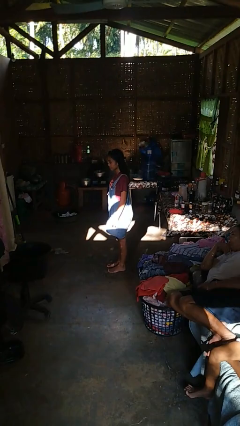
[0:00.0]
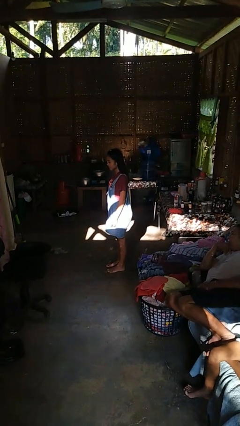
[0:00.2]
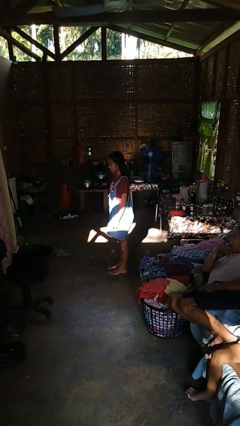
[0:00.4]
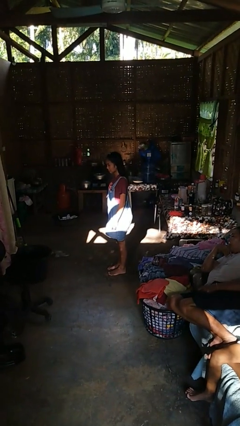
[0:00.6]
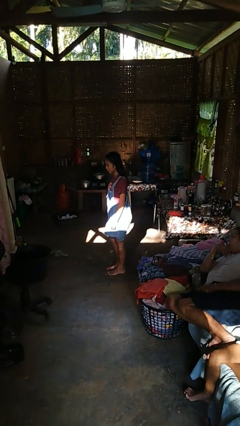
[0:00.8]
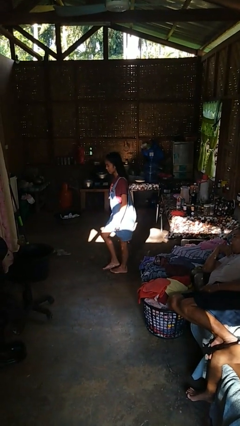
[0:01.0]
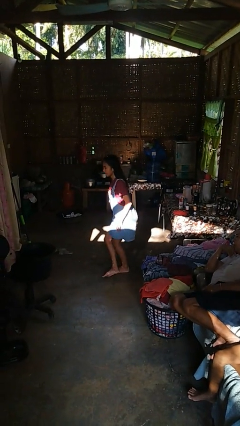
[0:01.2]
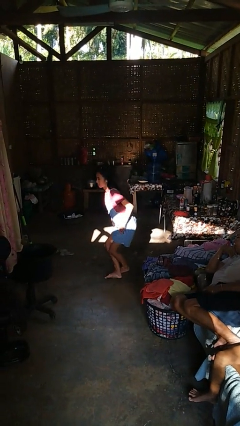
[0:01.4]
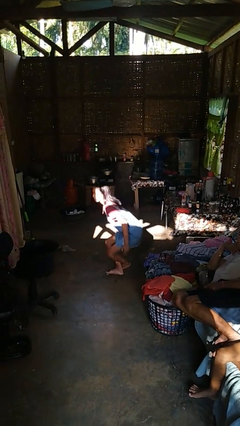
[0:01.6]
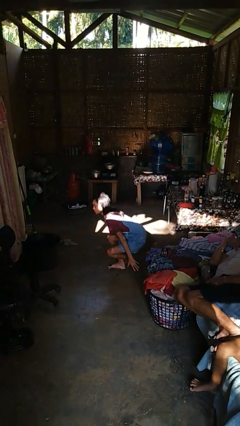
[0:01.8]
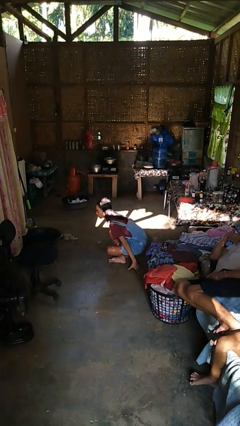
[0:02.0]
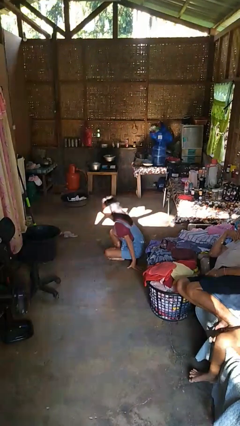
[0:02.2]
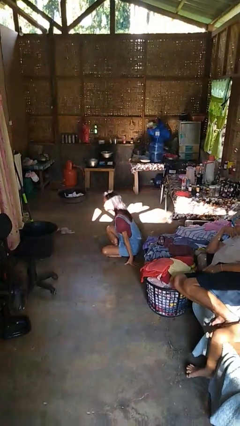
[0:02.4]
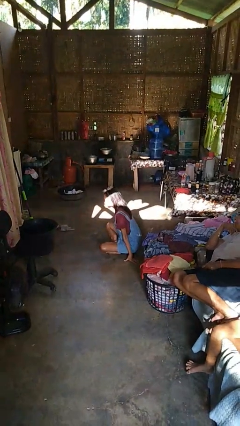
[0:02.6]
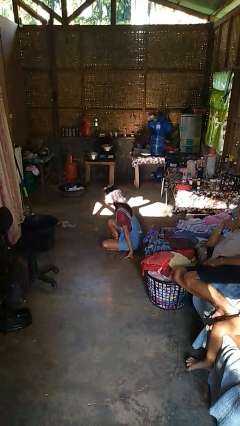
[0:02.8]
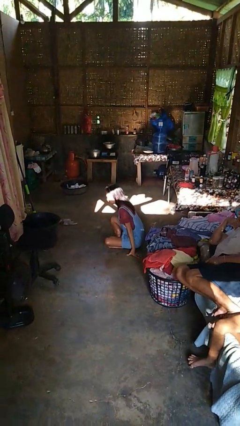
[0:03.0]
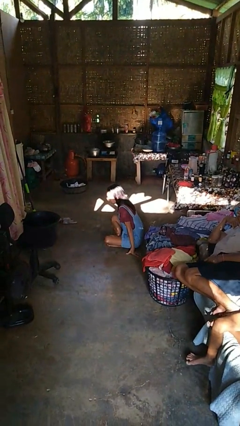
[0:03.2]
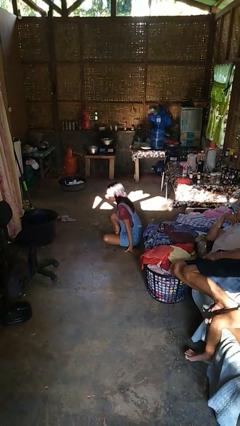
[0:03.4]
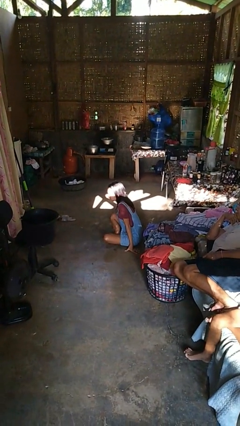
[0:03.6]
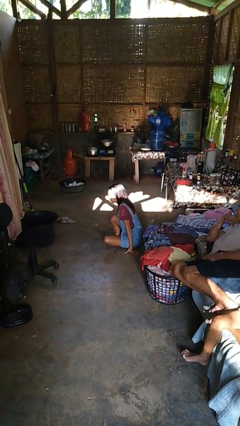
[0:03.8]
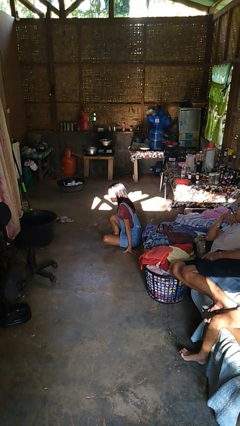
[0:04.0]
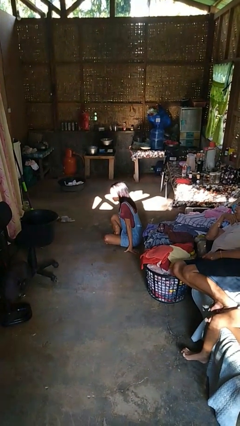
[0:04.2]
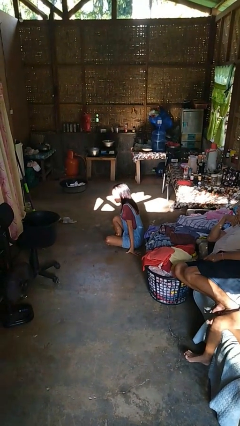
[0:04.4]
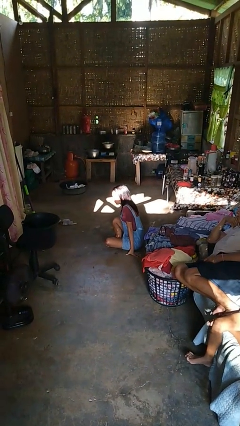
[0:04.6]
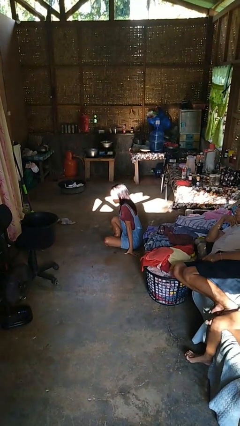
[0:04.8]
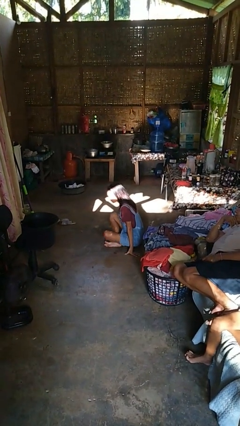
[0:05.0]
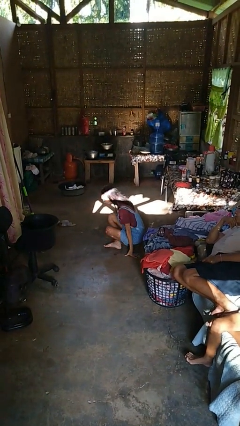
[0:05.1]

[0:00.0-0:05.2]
person sits crisscross

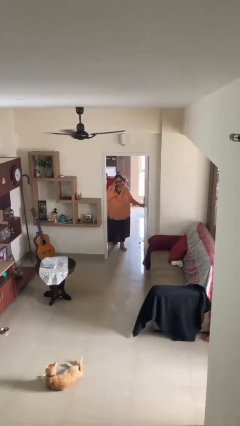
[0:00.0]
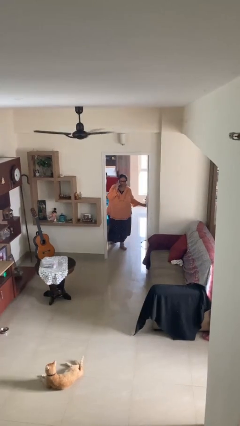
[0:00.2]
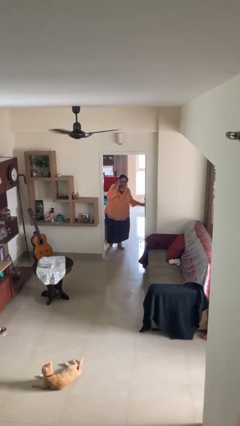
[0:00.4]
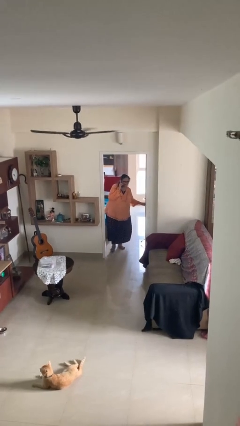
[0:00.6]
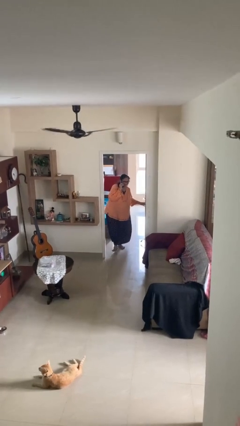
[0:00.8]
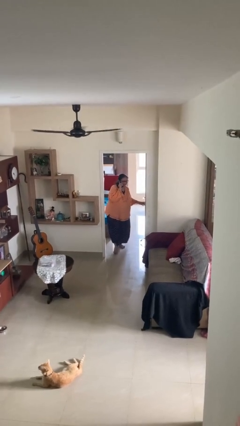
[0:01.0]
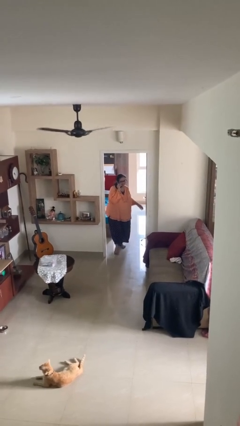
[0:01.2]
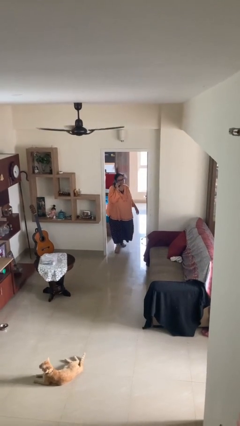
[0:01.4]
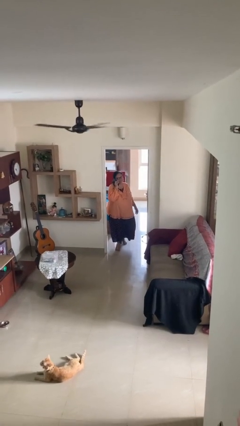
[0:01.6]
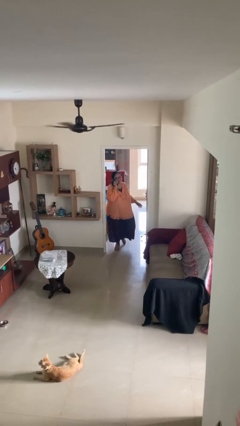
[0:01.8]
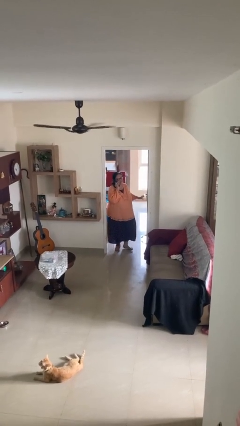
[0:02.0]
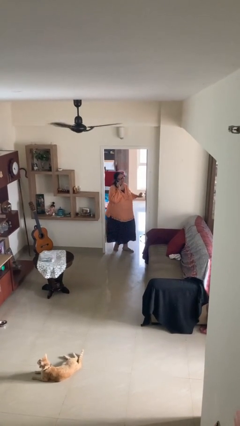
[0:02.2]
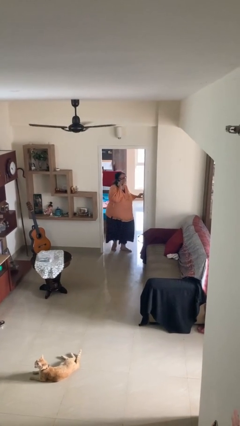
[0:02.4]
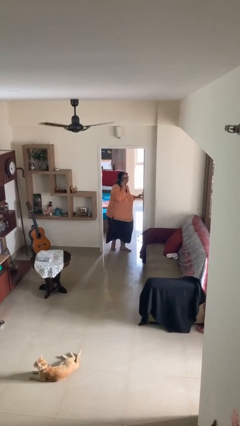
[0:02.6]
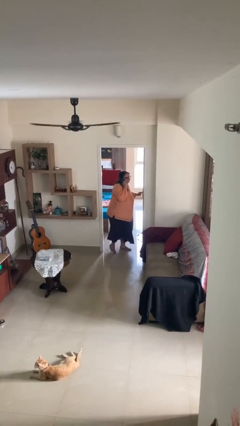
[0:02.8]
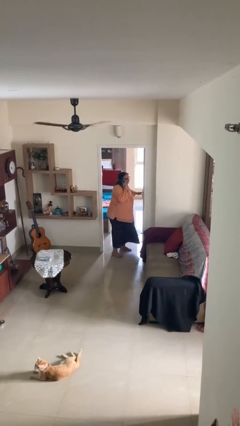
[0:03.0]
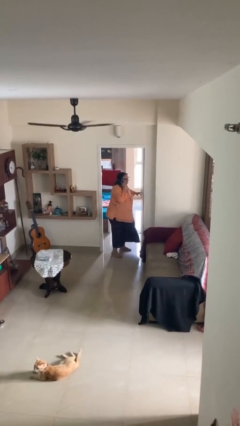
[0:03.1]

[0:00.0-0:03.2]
person enters scene through structure

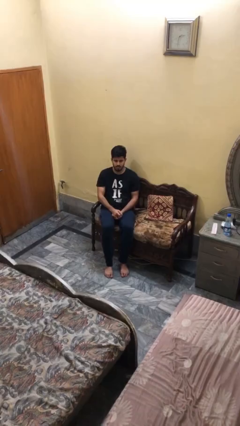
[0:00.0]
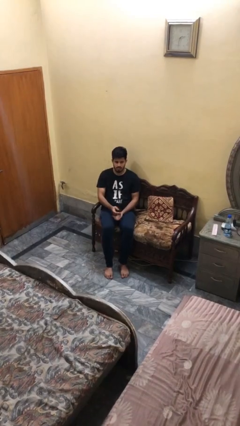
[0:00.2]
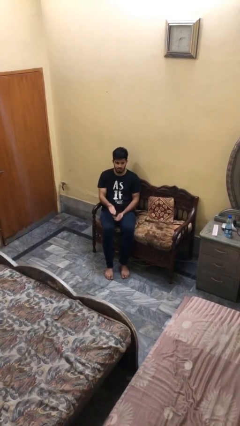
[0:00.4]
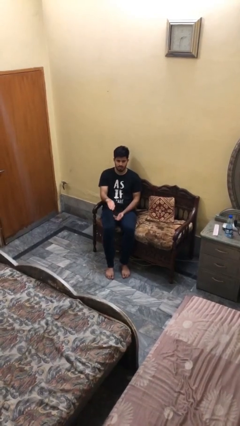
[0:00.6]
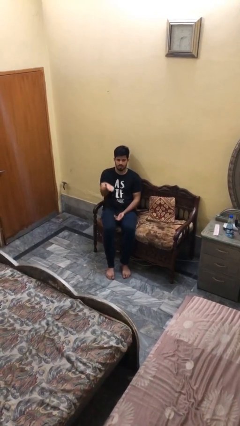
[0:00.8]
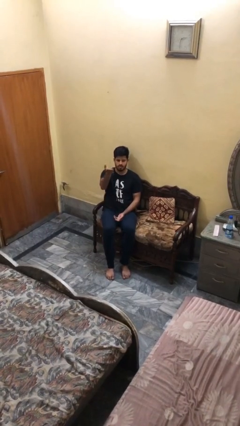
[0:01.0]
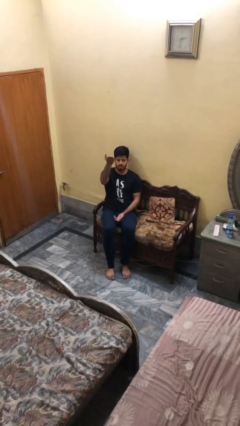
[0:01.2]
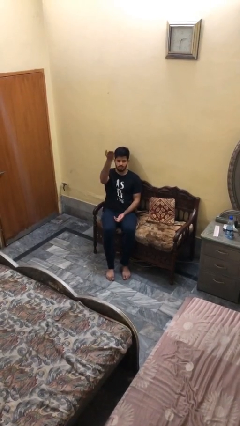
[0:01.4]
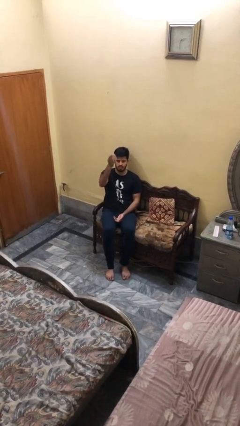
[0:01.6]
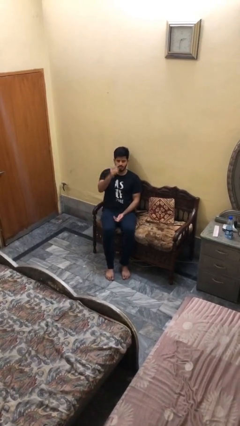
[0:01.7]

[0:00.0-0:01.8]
person gestures swipe up

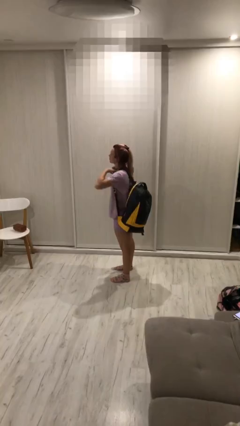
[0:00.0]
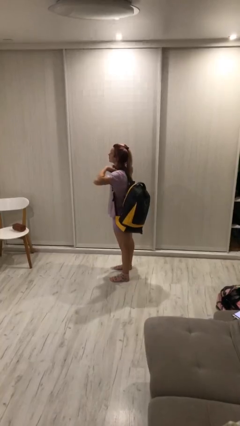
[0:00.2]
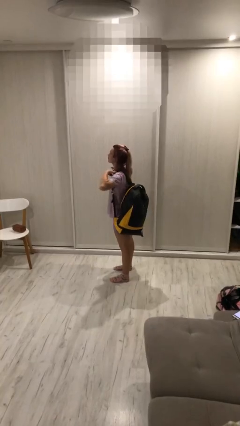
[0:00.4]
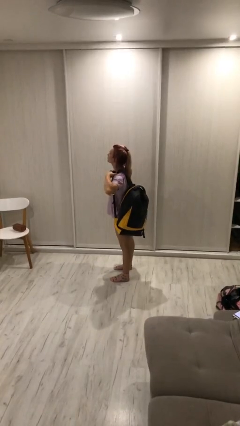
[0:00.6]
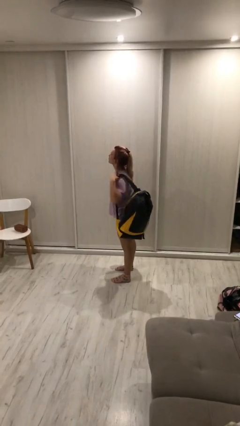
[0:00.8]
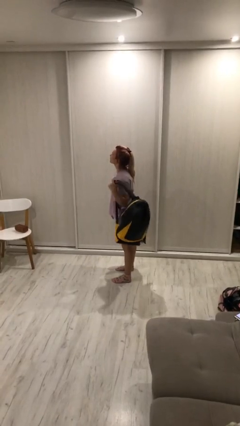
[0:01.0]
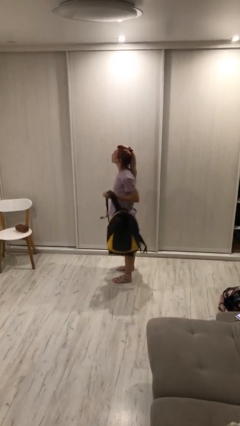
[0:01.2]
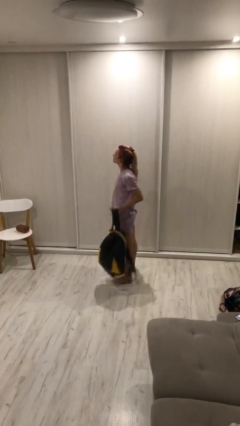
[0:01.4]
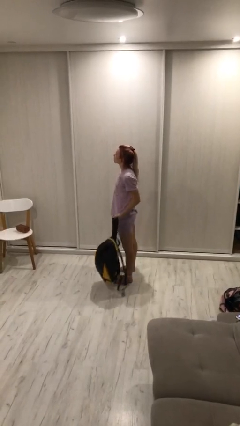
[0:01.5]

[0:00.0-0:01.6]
person takes off backpack

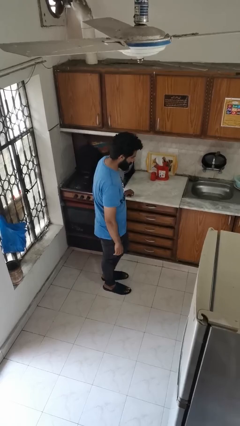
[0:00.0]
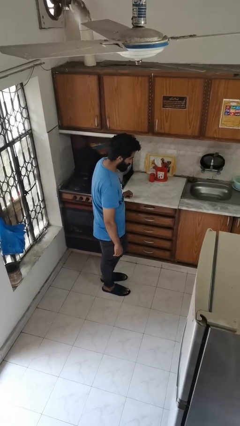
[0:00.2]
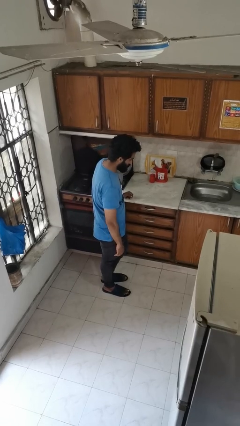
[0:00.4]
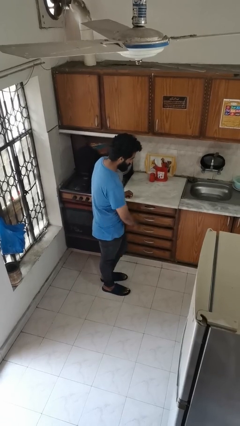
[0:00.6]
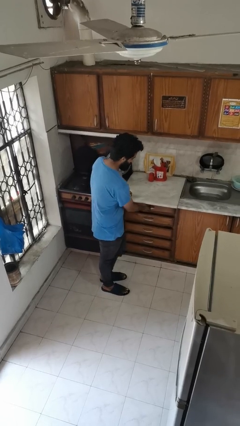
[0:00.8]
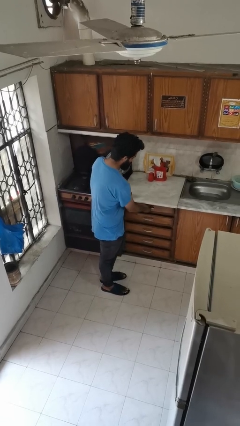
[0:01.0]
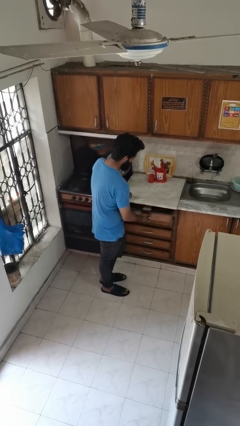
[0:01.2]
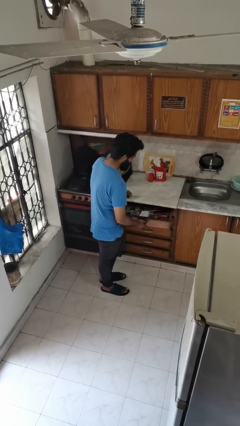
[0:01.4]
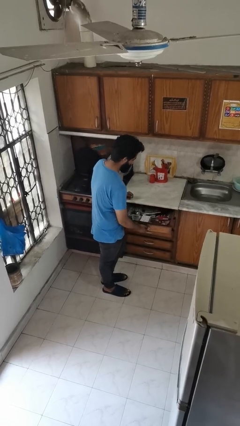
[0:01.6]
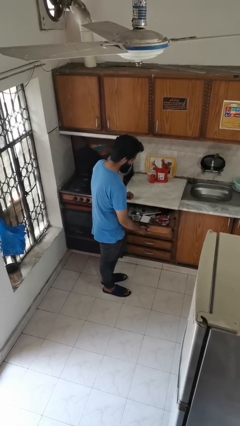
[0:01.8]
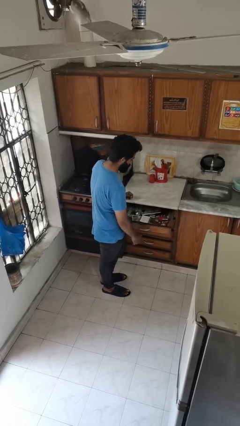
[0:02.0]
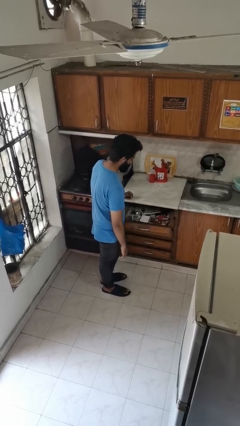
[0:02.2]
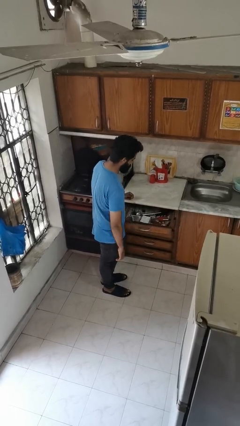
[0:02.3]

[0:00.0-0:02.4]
person opens kitchen drawer

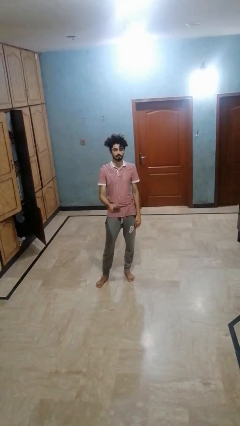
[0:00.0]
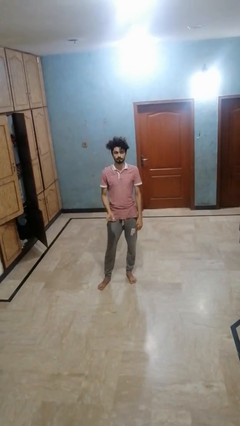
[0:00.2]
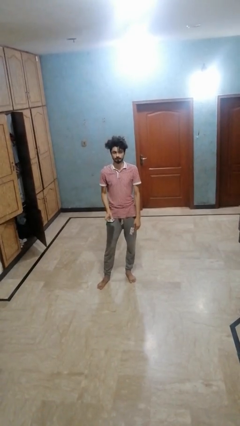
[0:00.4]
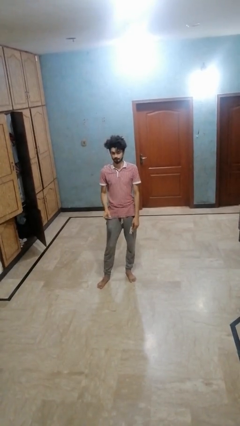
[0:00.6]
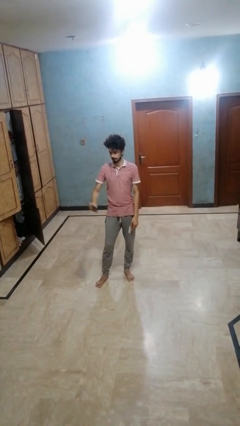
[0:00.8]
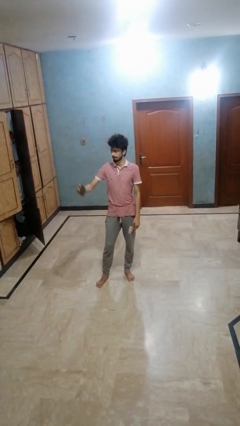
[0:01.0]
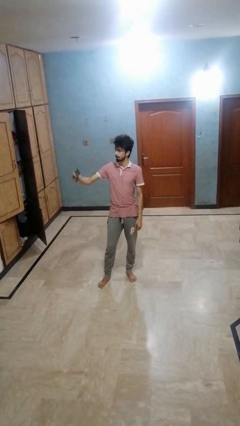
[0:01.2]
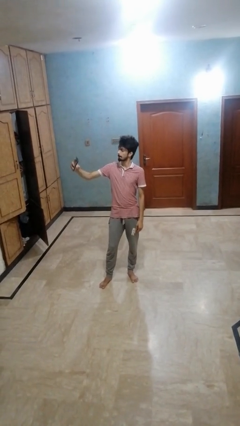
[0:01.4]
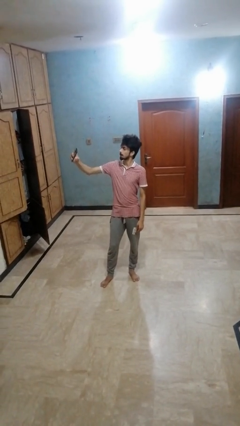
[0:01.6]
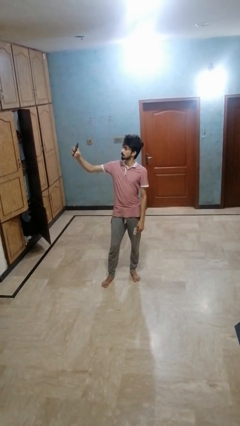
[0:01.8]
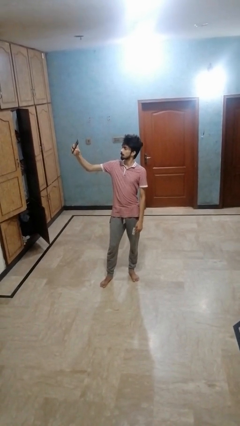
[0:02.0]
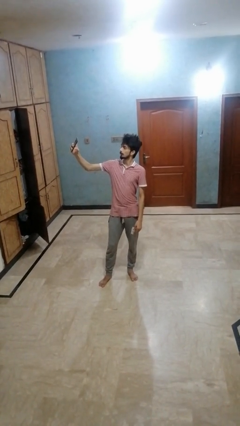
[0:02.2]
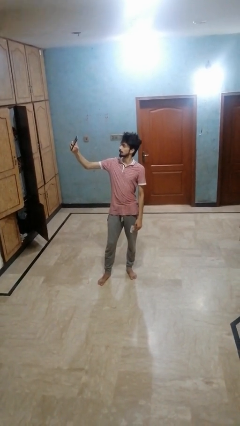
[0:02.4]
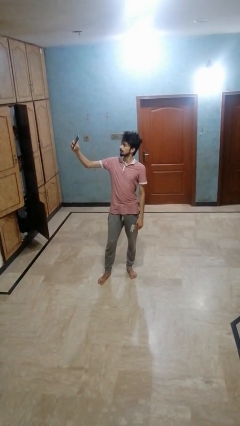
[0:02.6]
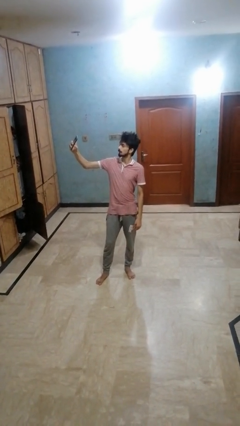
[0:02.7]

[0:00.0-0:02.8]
person takes selfie
